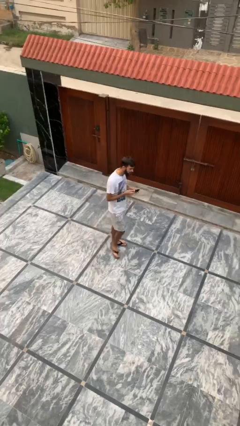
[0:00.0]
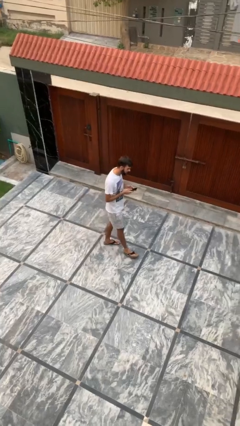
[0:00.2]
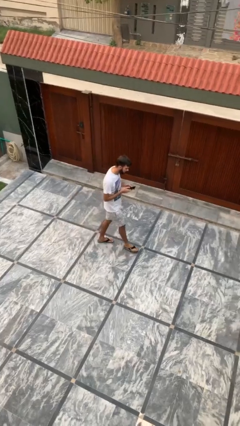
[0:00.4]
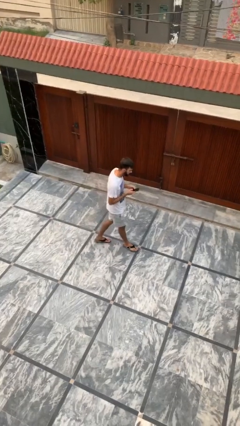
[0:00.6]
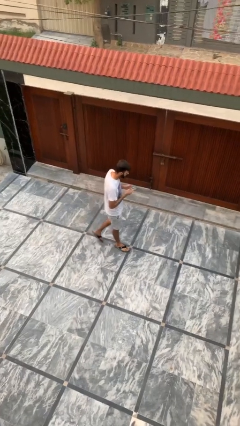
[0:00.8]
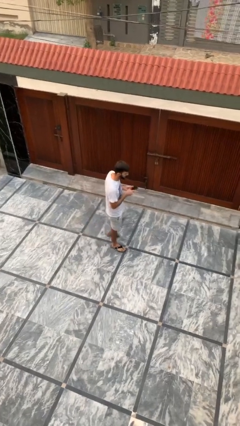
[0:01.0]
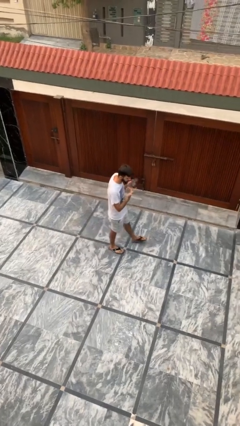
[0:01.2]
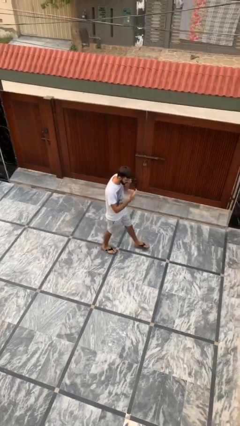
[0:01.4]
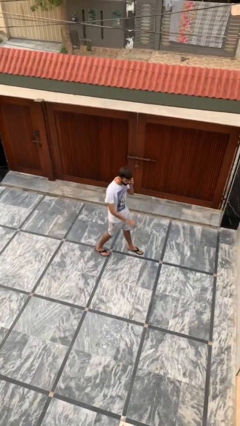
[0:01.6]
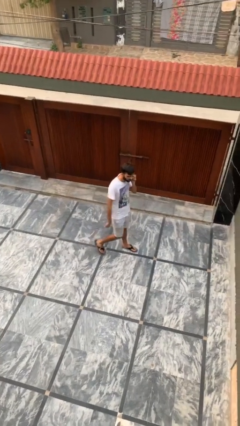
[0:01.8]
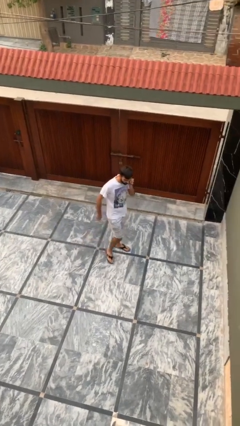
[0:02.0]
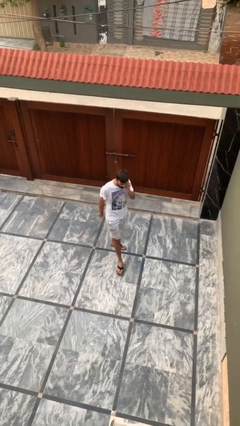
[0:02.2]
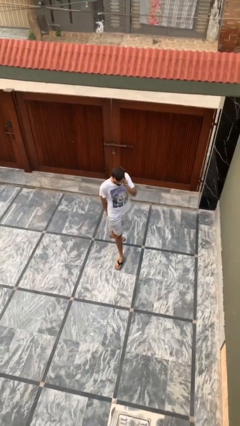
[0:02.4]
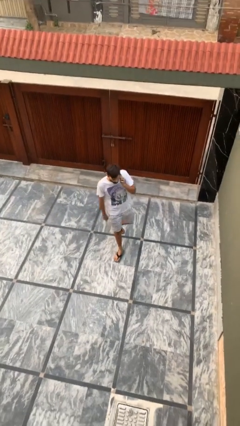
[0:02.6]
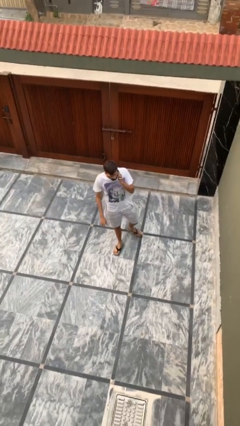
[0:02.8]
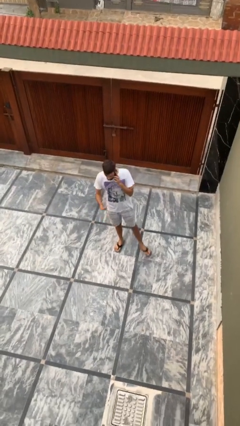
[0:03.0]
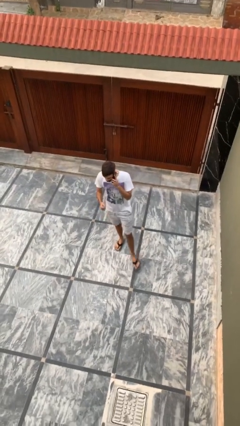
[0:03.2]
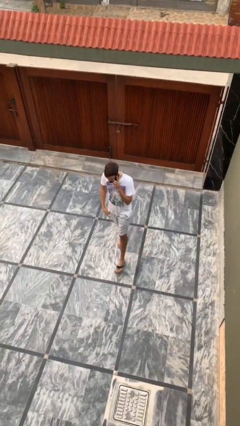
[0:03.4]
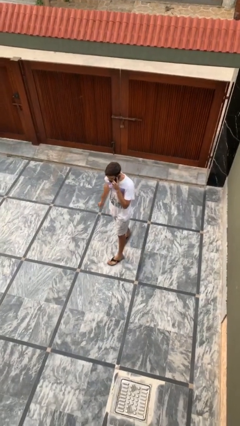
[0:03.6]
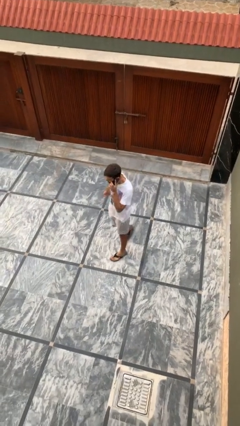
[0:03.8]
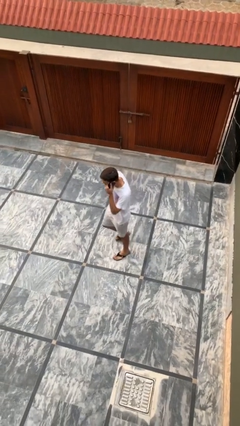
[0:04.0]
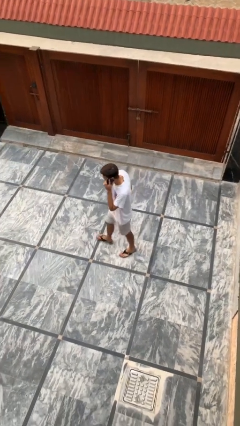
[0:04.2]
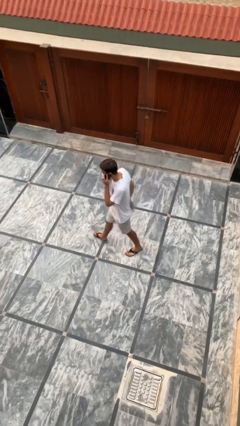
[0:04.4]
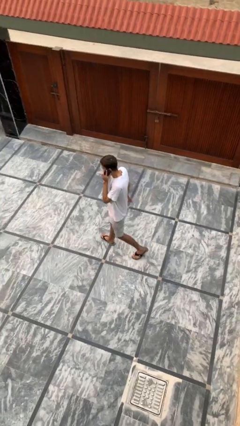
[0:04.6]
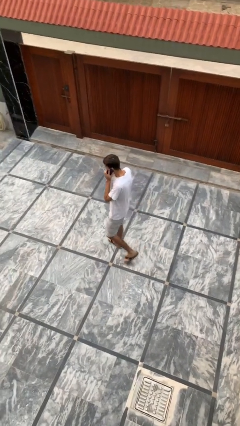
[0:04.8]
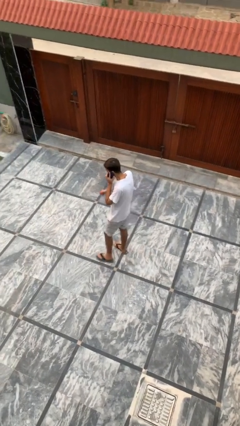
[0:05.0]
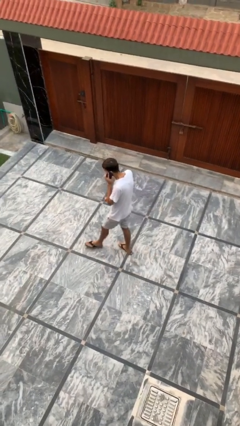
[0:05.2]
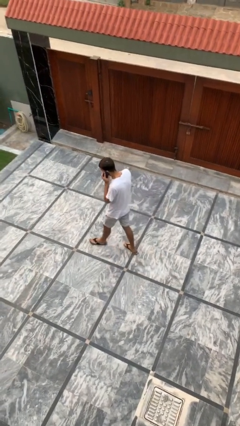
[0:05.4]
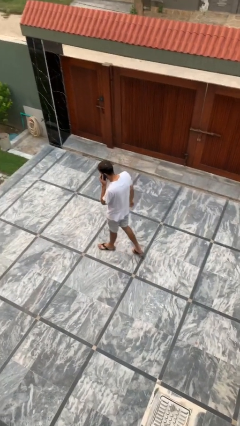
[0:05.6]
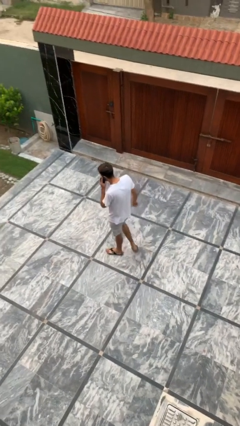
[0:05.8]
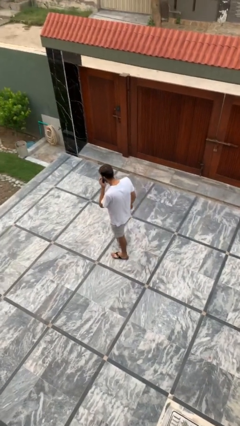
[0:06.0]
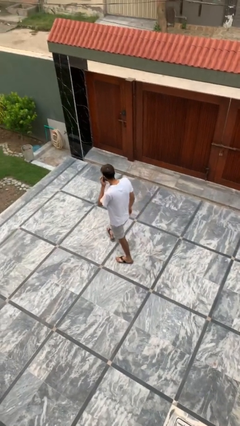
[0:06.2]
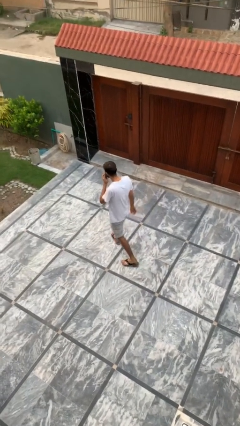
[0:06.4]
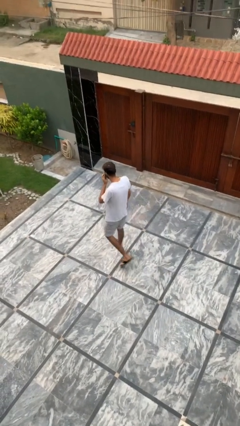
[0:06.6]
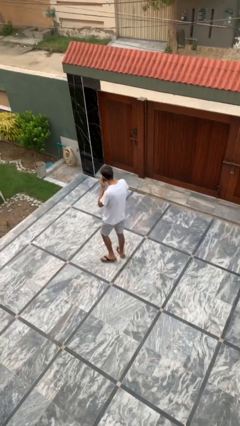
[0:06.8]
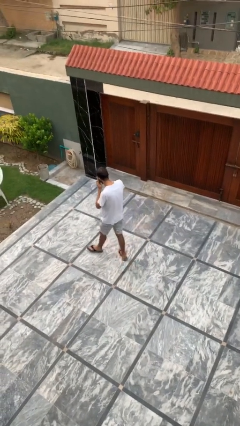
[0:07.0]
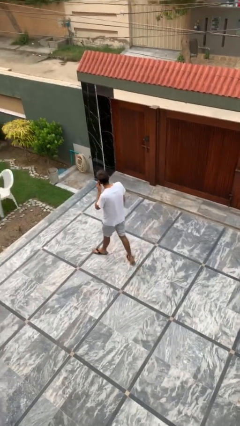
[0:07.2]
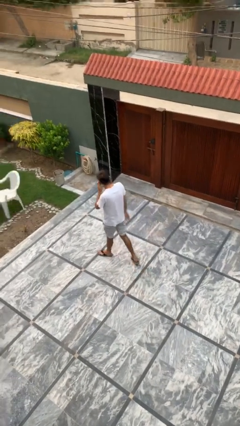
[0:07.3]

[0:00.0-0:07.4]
person talks on phone

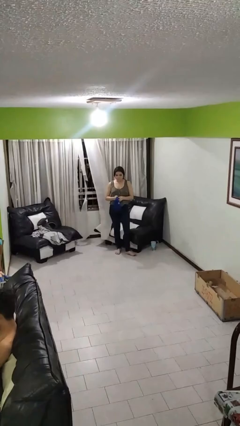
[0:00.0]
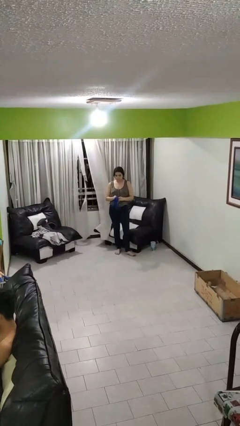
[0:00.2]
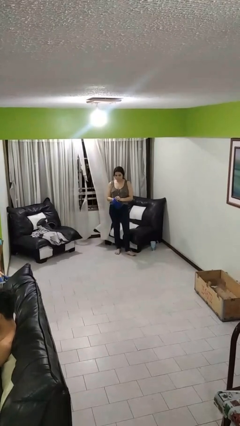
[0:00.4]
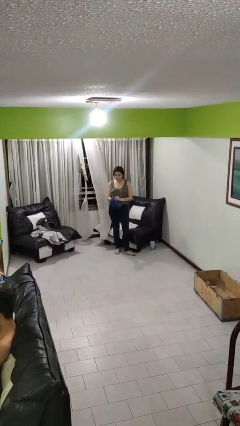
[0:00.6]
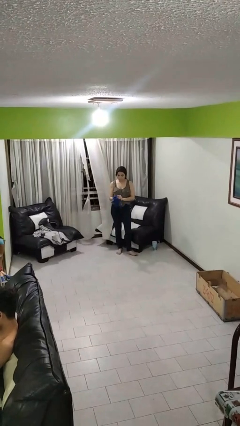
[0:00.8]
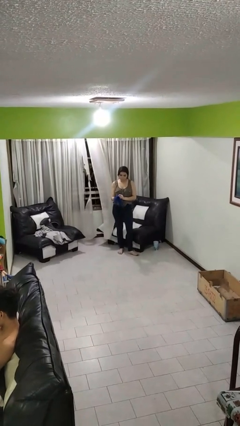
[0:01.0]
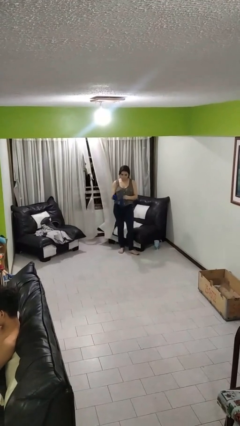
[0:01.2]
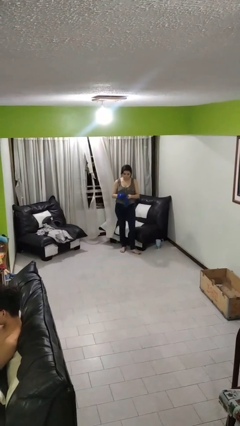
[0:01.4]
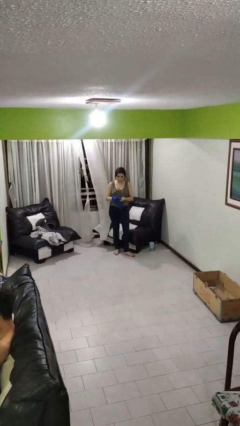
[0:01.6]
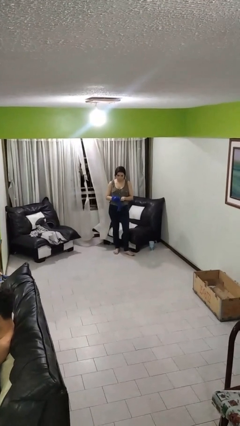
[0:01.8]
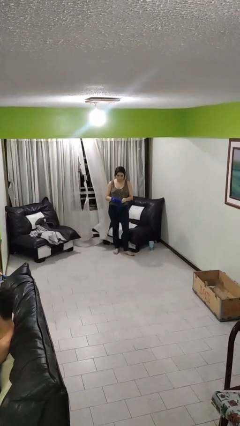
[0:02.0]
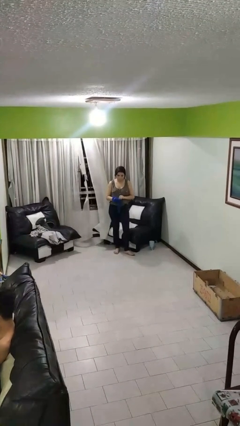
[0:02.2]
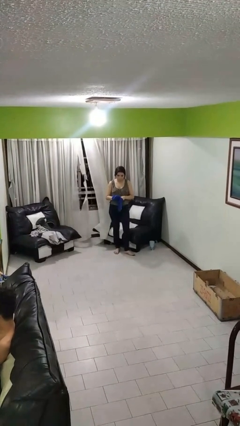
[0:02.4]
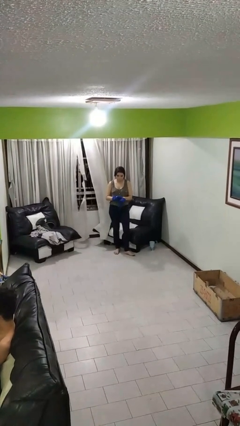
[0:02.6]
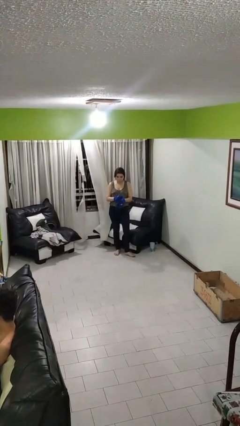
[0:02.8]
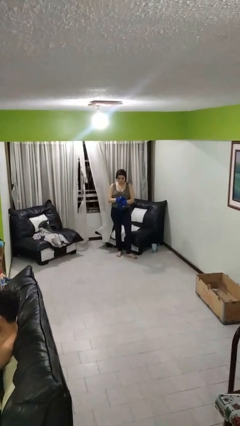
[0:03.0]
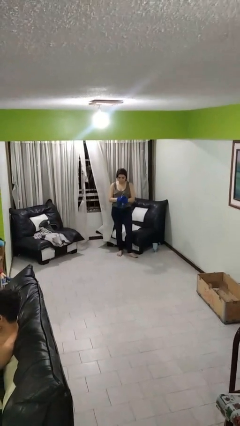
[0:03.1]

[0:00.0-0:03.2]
person puts on gloves

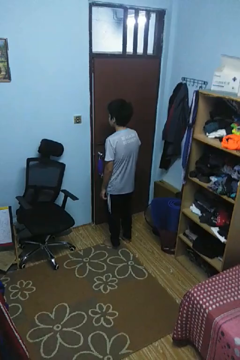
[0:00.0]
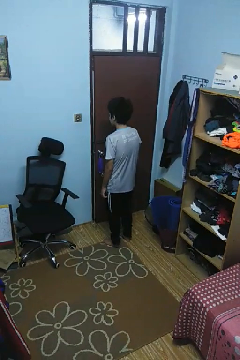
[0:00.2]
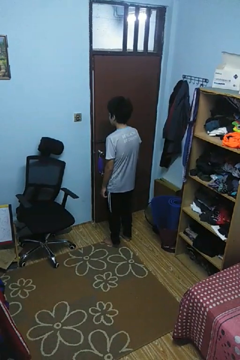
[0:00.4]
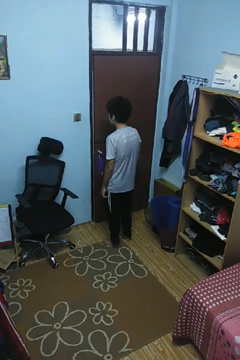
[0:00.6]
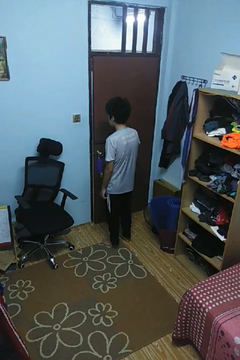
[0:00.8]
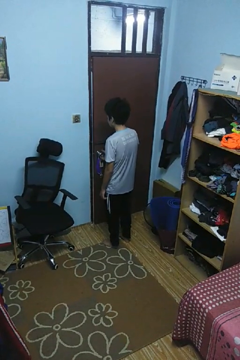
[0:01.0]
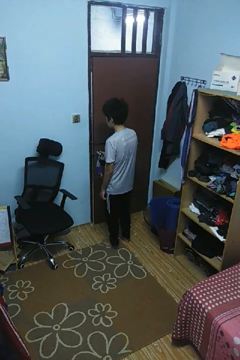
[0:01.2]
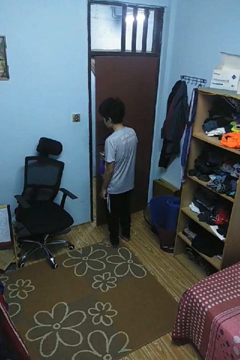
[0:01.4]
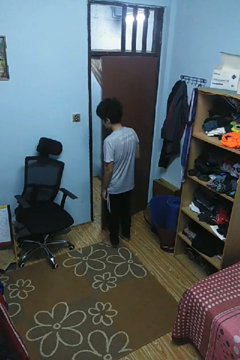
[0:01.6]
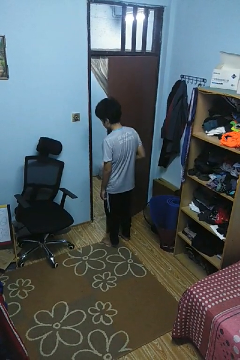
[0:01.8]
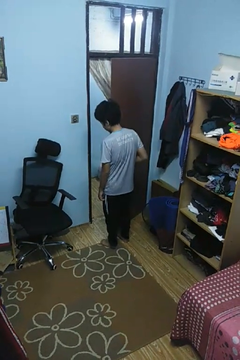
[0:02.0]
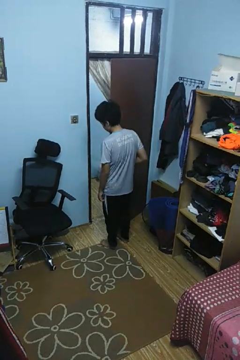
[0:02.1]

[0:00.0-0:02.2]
person opens facility door

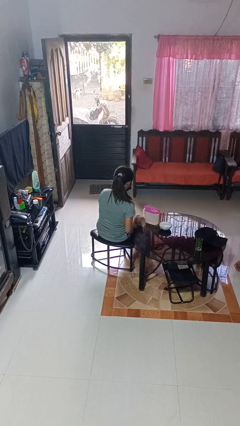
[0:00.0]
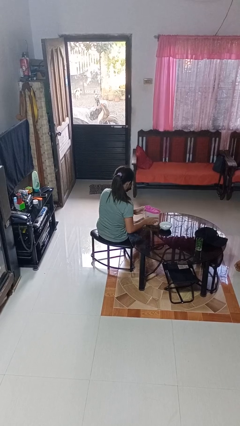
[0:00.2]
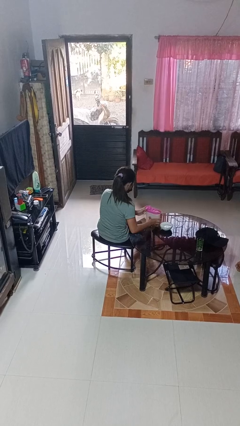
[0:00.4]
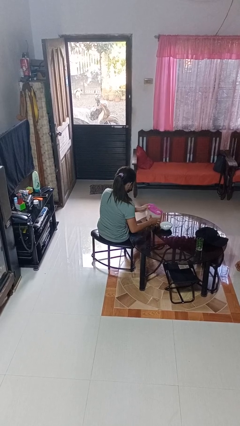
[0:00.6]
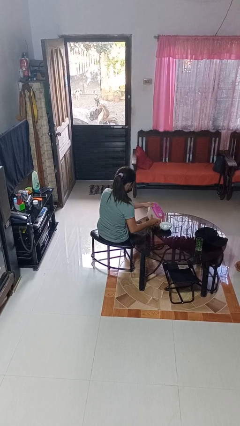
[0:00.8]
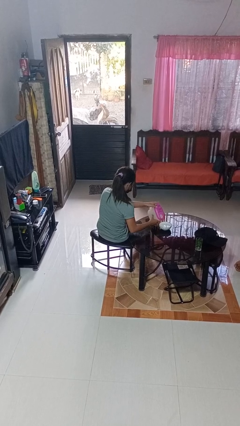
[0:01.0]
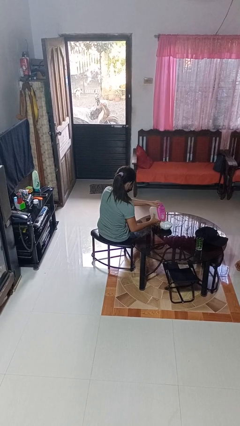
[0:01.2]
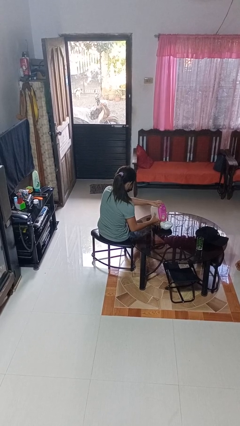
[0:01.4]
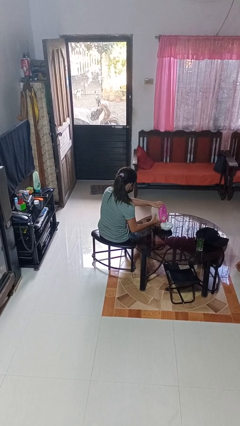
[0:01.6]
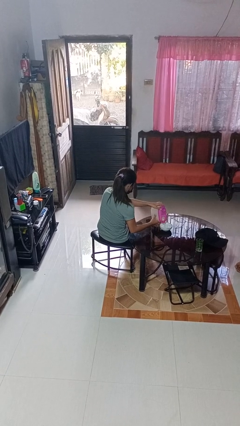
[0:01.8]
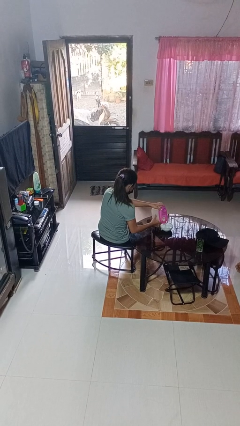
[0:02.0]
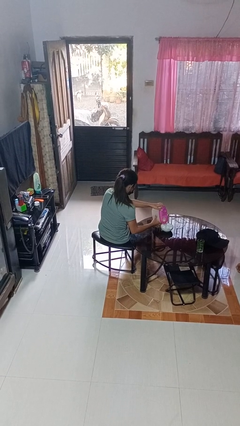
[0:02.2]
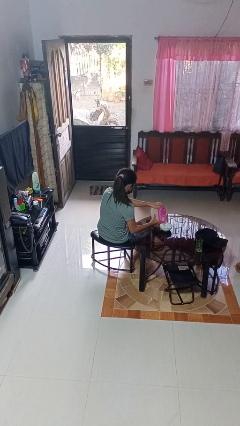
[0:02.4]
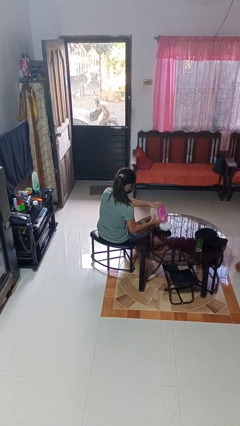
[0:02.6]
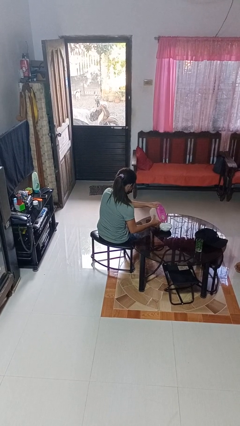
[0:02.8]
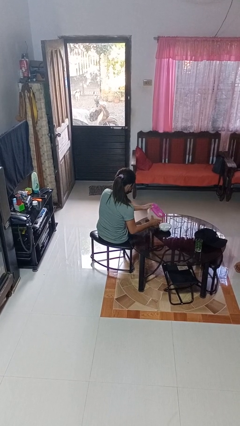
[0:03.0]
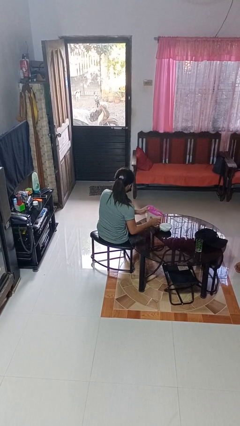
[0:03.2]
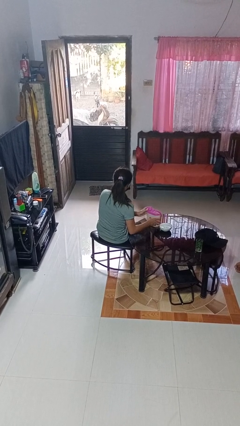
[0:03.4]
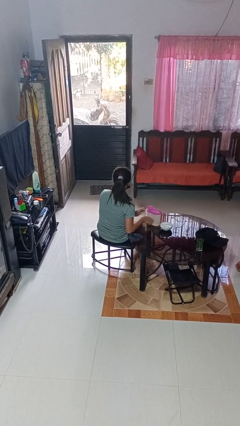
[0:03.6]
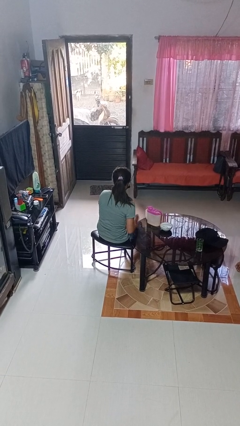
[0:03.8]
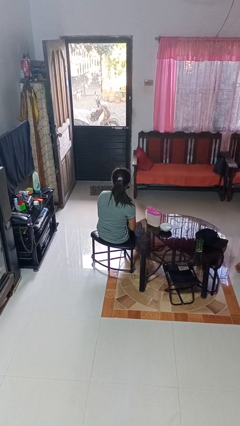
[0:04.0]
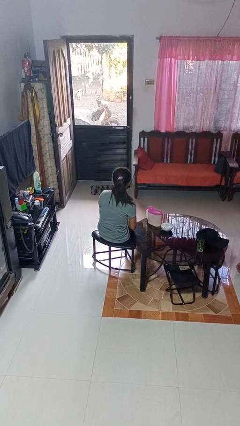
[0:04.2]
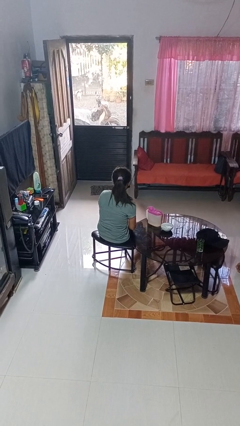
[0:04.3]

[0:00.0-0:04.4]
person pours into bowl

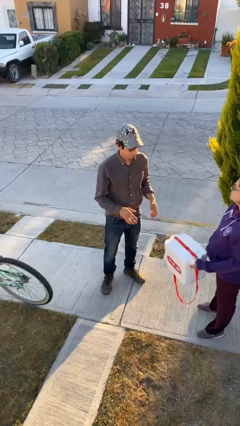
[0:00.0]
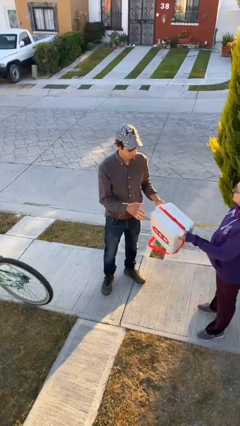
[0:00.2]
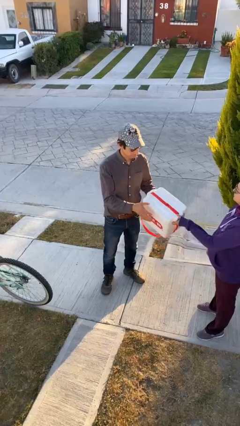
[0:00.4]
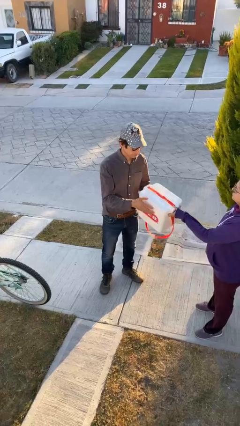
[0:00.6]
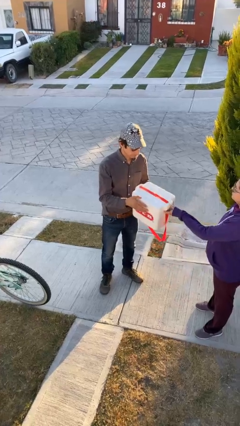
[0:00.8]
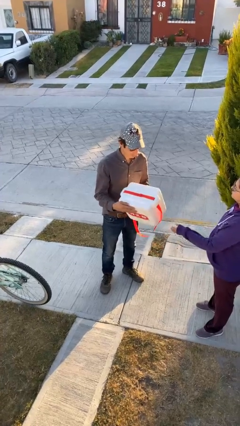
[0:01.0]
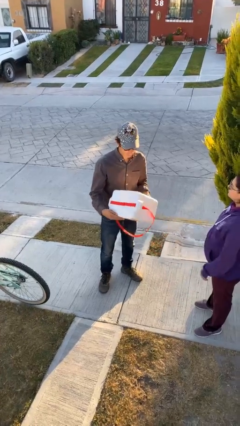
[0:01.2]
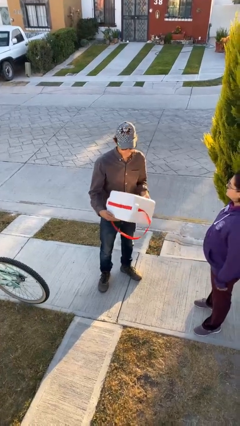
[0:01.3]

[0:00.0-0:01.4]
person transfers object to person
